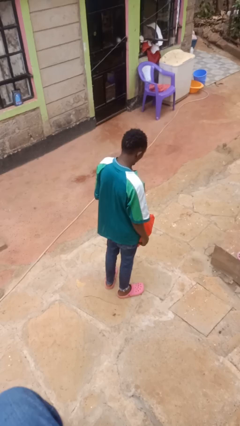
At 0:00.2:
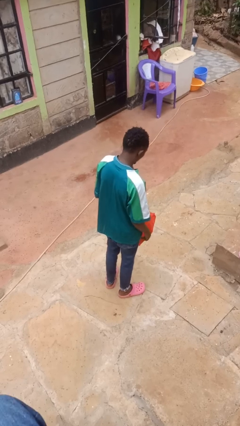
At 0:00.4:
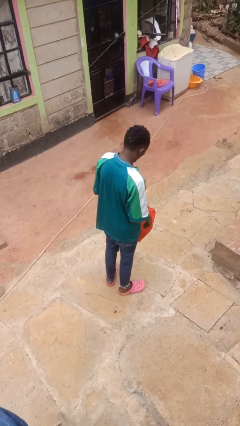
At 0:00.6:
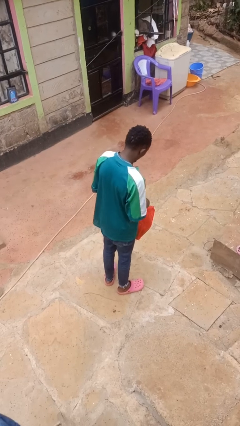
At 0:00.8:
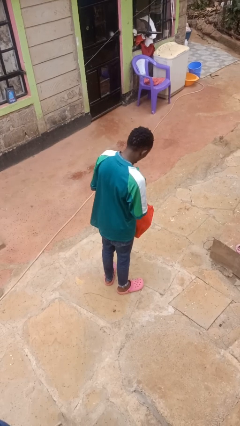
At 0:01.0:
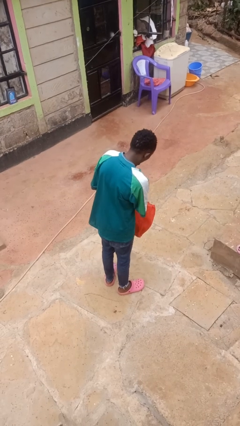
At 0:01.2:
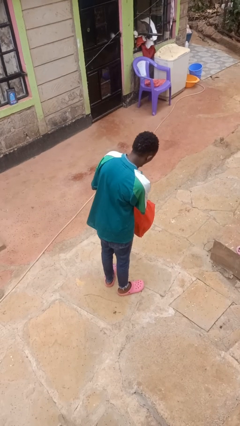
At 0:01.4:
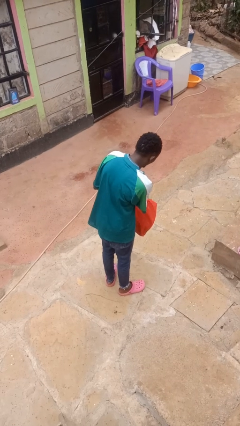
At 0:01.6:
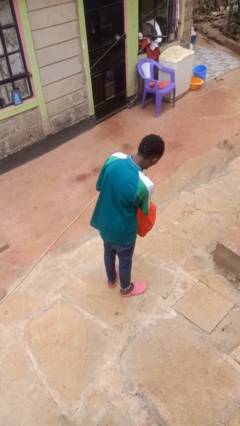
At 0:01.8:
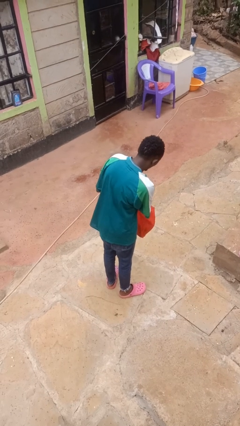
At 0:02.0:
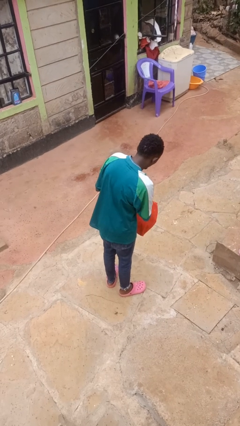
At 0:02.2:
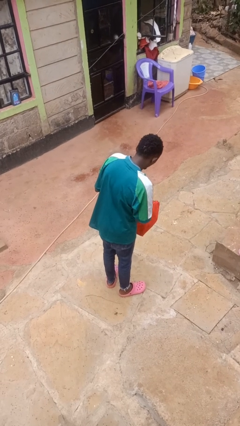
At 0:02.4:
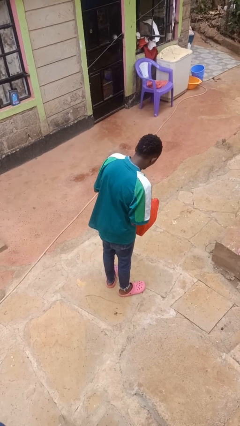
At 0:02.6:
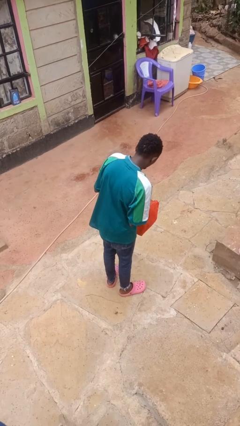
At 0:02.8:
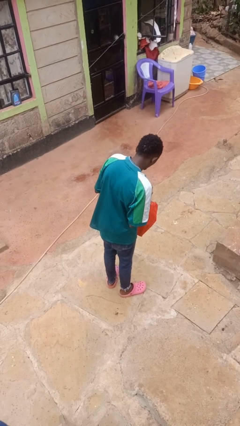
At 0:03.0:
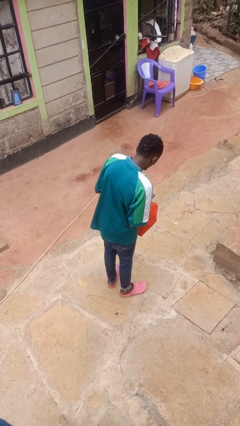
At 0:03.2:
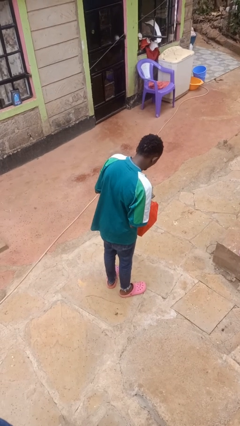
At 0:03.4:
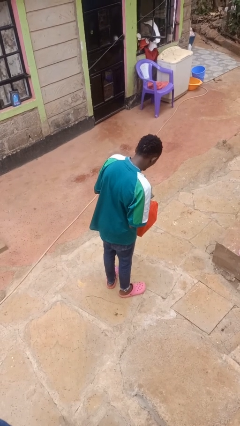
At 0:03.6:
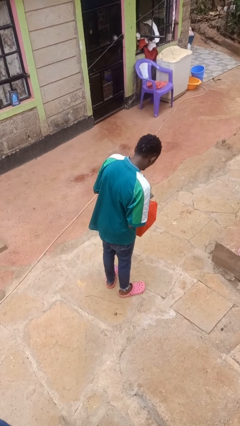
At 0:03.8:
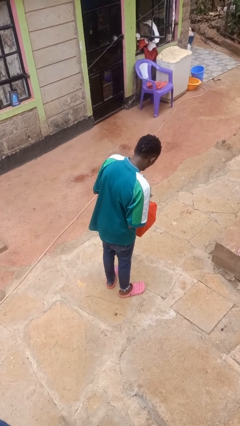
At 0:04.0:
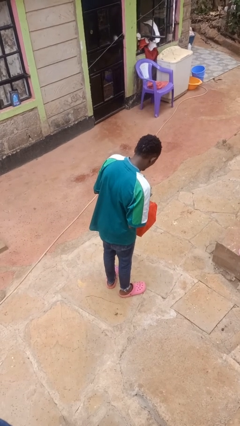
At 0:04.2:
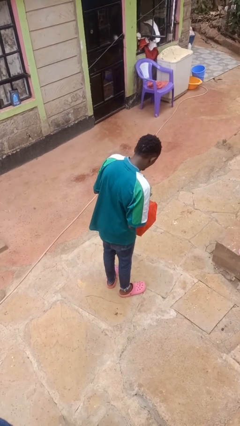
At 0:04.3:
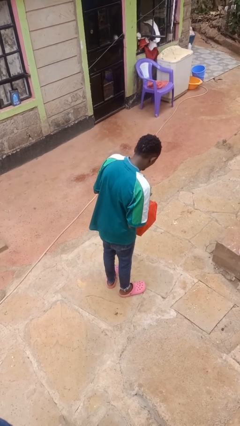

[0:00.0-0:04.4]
person takes object from bag

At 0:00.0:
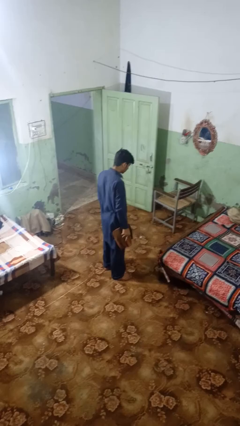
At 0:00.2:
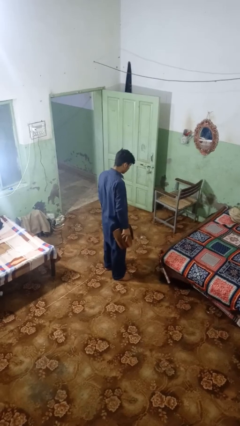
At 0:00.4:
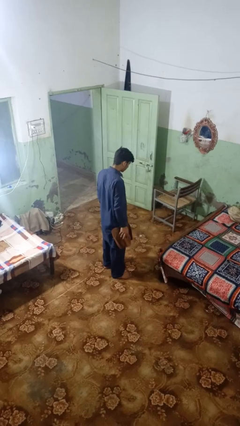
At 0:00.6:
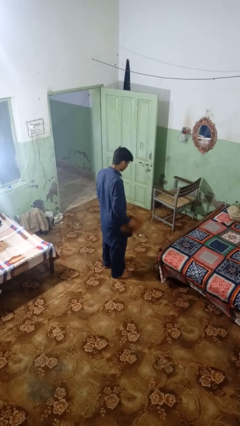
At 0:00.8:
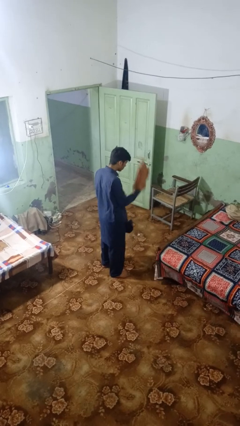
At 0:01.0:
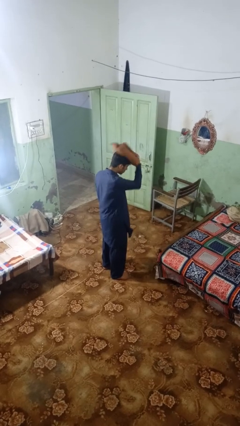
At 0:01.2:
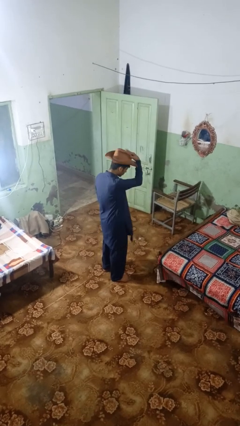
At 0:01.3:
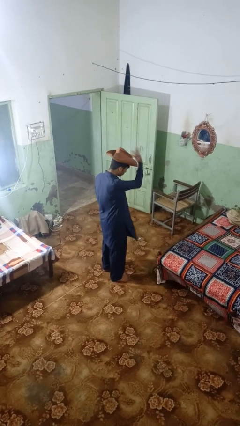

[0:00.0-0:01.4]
person puts on hat

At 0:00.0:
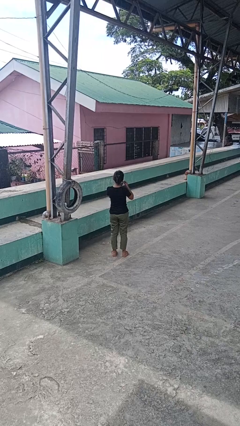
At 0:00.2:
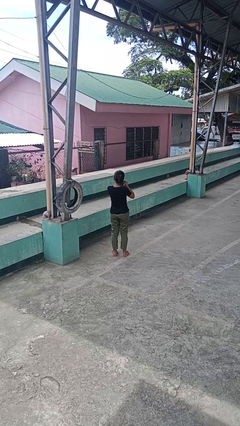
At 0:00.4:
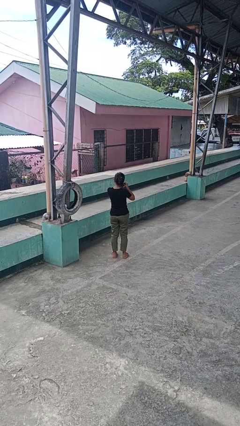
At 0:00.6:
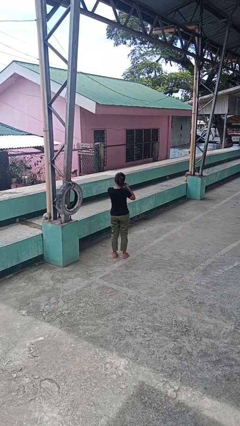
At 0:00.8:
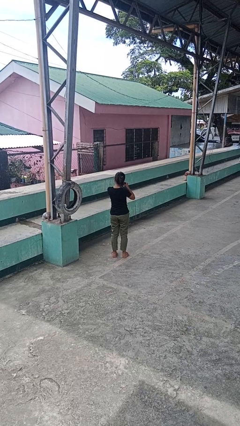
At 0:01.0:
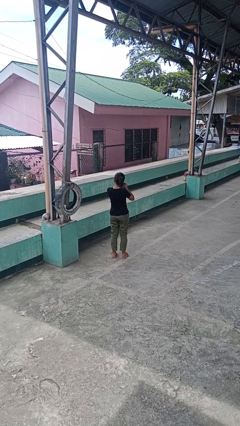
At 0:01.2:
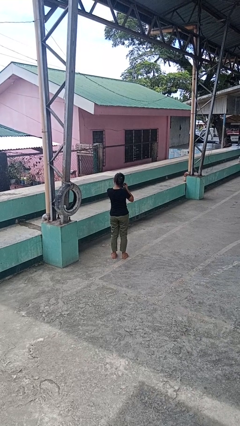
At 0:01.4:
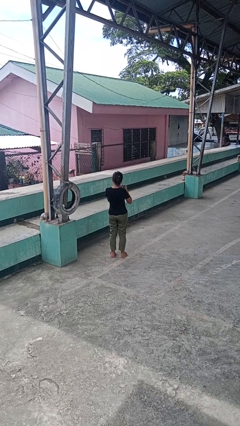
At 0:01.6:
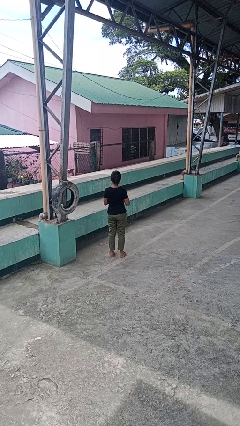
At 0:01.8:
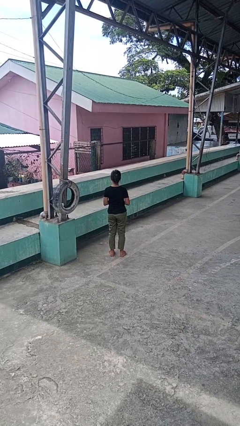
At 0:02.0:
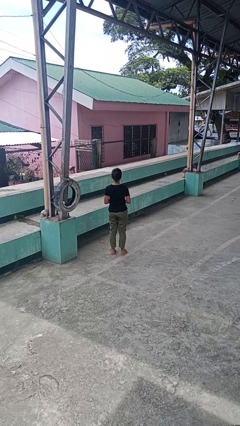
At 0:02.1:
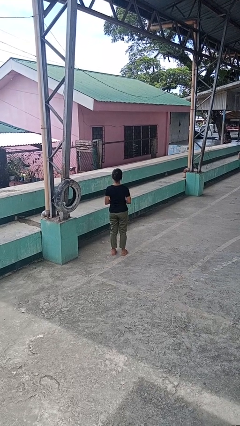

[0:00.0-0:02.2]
person takes off earrings

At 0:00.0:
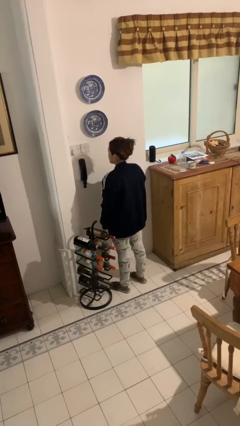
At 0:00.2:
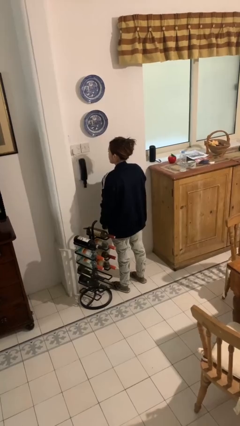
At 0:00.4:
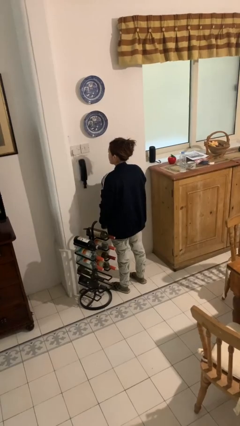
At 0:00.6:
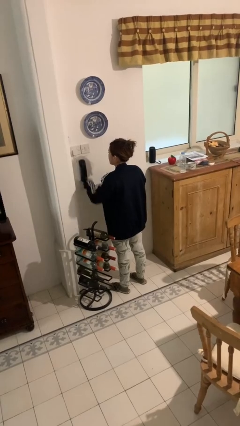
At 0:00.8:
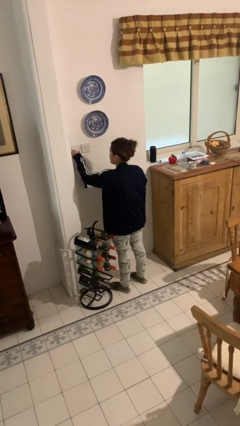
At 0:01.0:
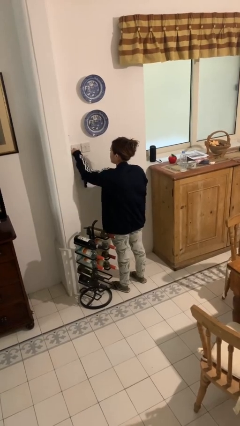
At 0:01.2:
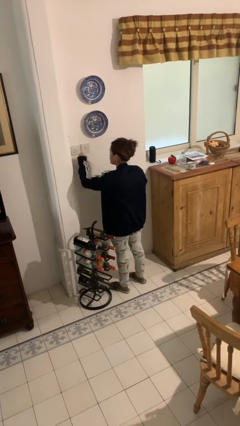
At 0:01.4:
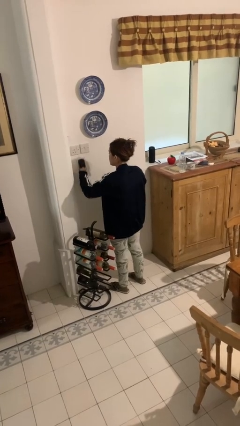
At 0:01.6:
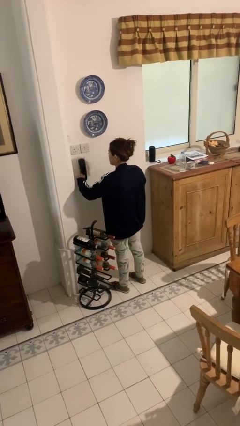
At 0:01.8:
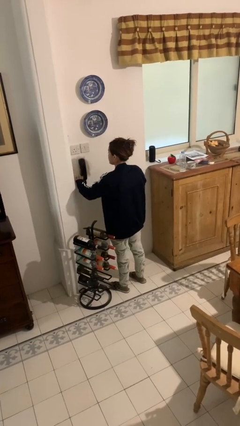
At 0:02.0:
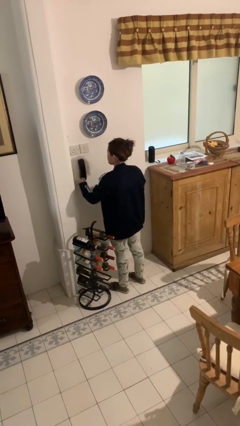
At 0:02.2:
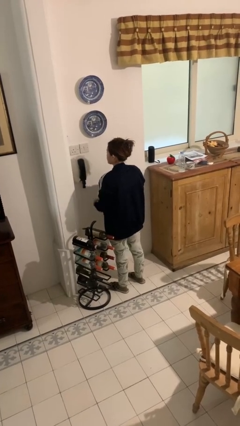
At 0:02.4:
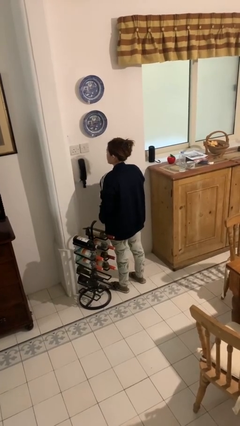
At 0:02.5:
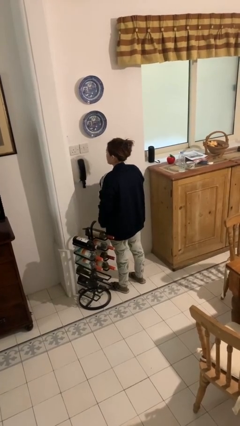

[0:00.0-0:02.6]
person unplugs from electrical socket

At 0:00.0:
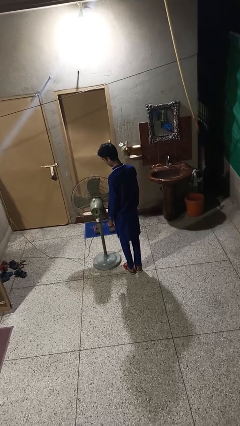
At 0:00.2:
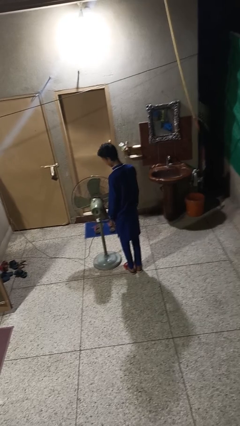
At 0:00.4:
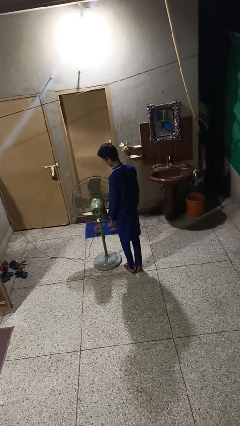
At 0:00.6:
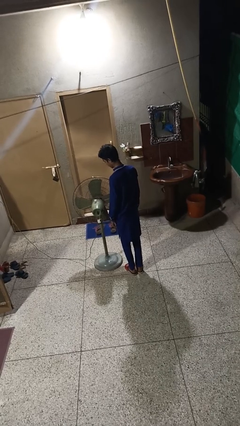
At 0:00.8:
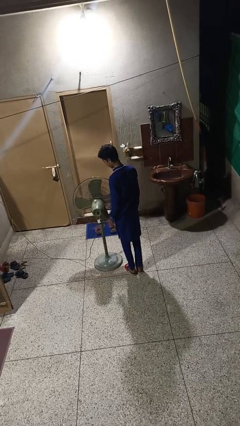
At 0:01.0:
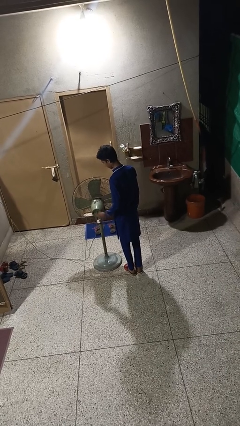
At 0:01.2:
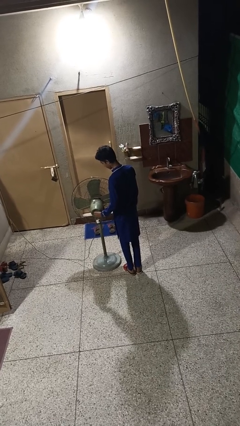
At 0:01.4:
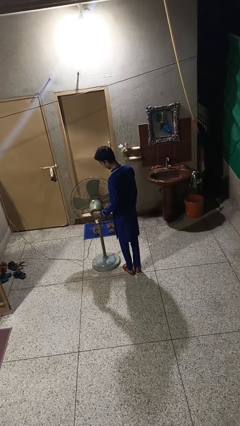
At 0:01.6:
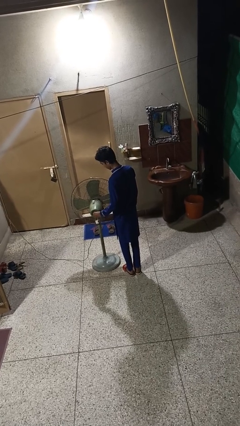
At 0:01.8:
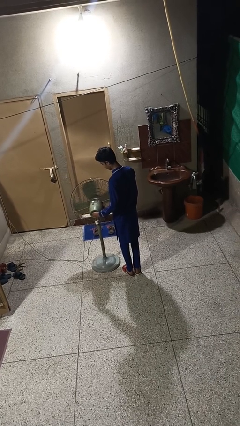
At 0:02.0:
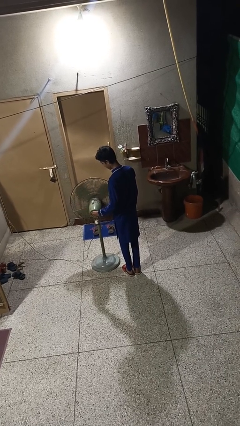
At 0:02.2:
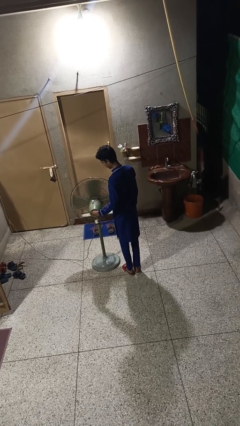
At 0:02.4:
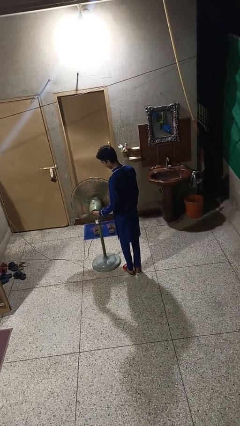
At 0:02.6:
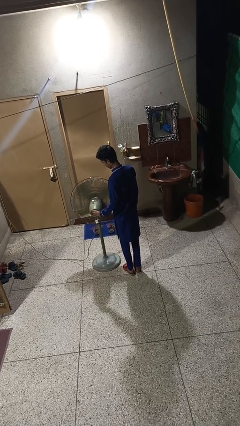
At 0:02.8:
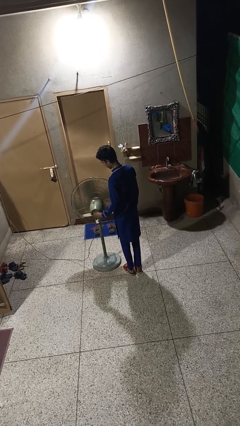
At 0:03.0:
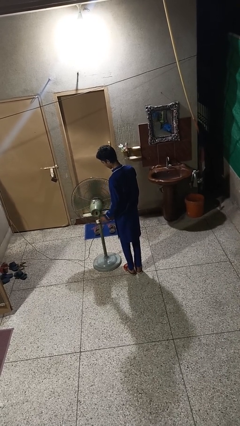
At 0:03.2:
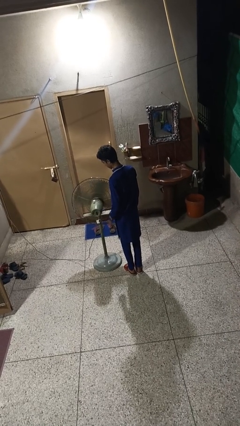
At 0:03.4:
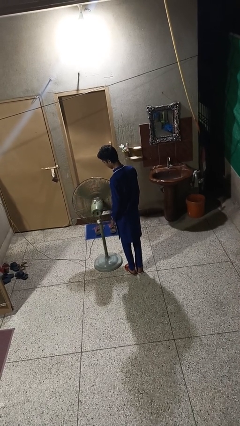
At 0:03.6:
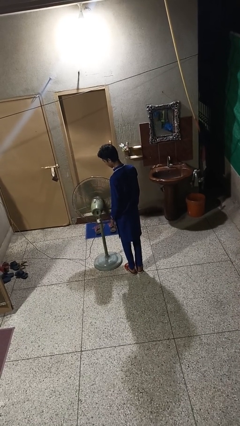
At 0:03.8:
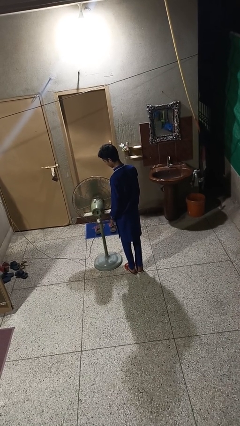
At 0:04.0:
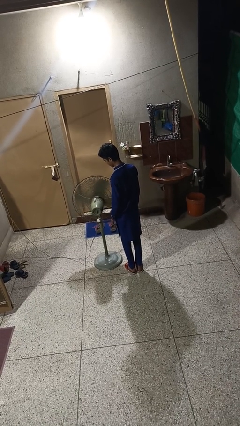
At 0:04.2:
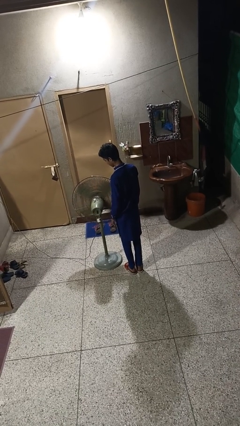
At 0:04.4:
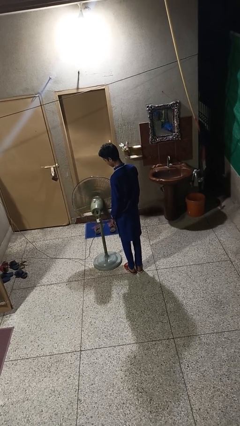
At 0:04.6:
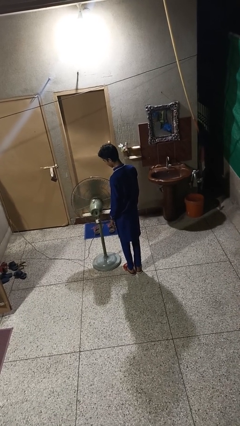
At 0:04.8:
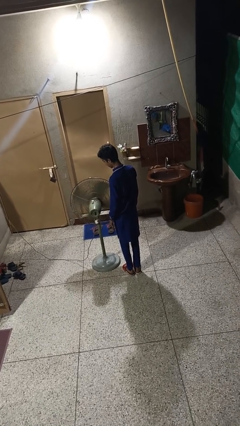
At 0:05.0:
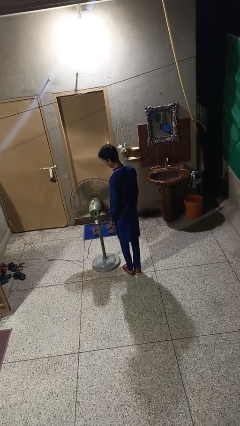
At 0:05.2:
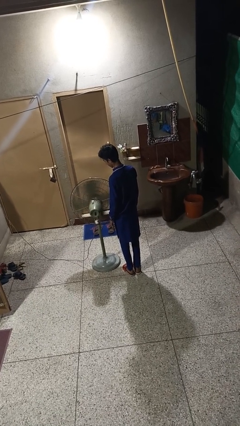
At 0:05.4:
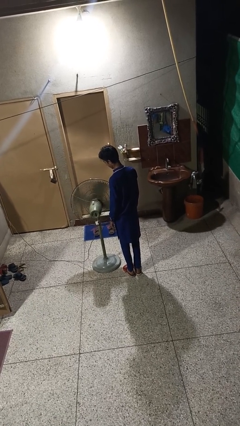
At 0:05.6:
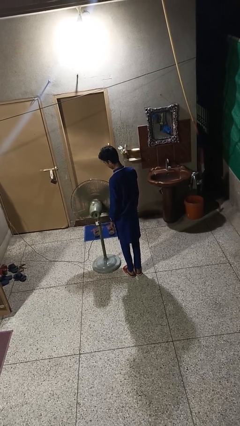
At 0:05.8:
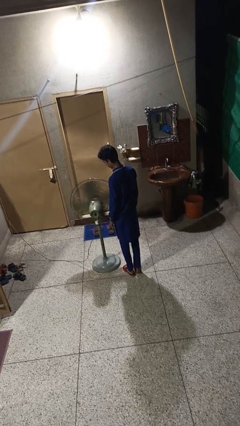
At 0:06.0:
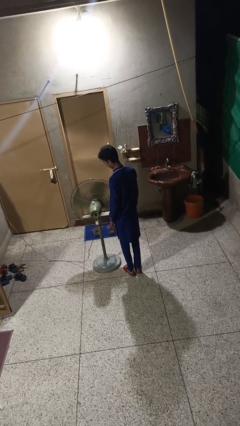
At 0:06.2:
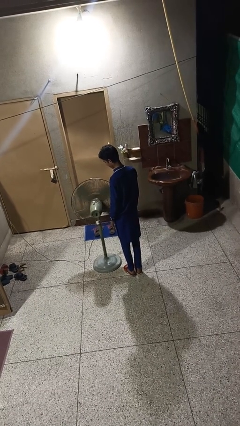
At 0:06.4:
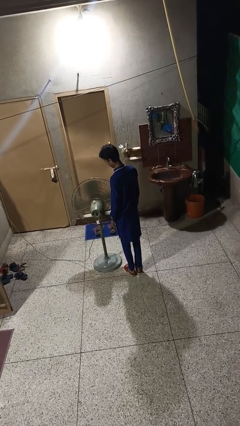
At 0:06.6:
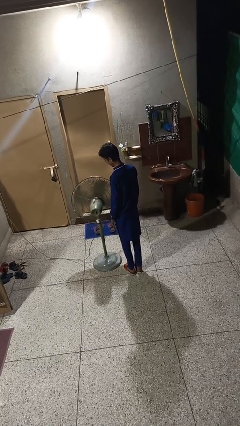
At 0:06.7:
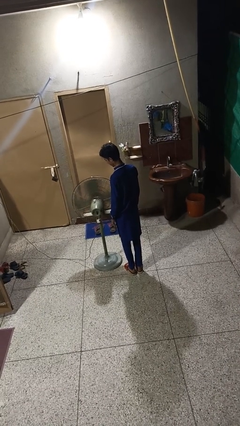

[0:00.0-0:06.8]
person turns on fan

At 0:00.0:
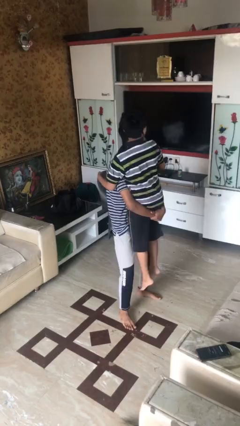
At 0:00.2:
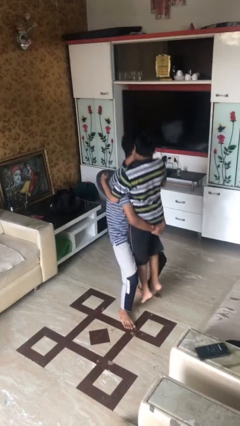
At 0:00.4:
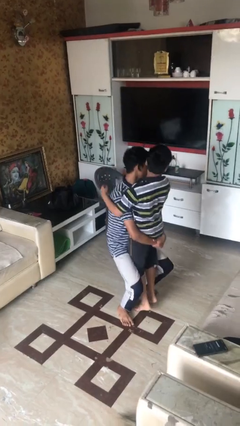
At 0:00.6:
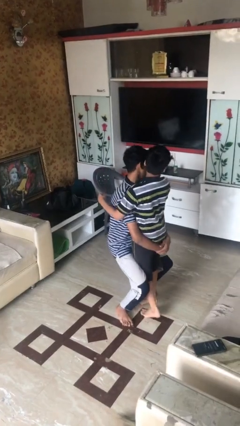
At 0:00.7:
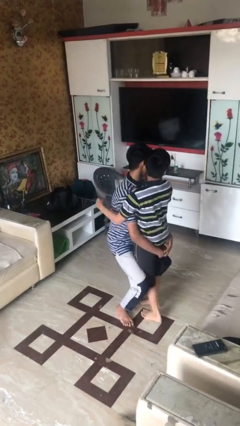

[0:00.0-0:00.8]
person puts down person
